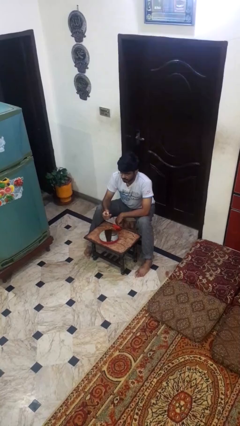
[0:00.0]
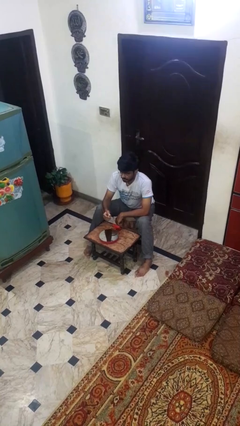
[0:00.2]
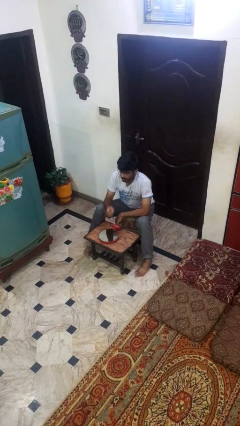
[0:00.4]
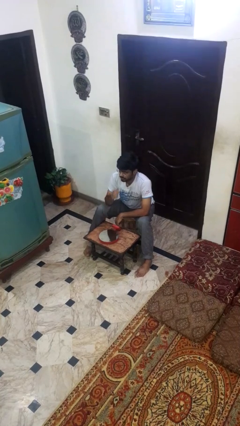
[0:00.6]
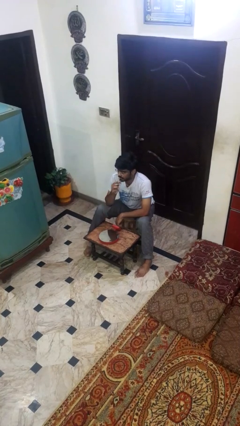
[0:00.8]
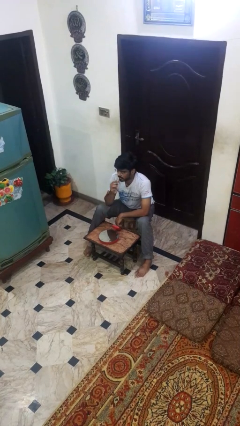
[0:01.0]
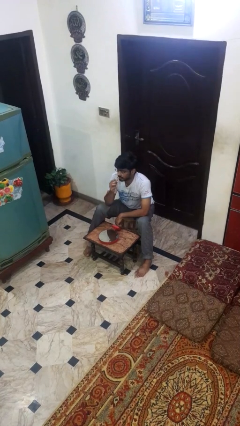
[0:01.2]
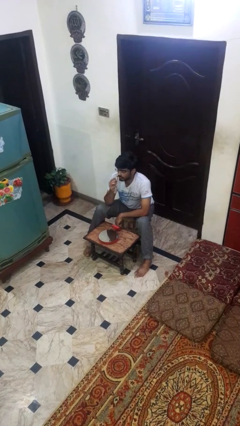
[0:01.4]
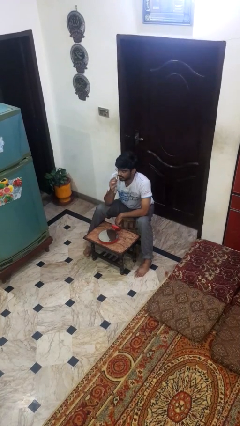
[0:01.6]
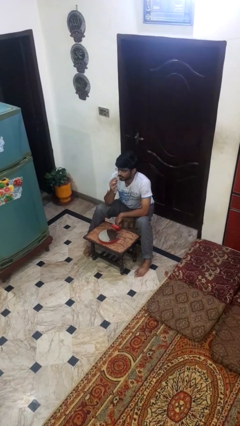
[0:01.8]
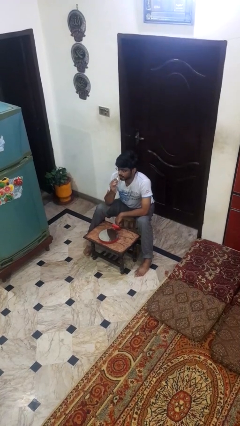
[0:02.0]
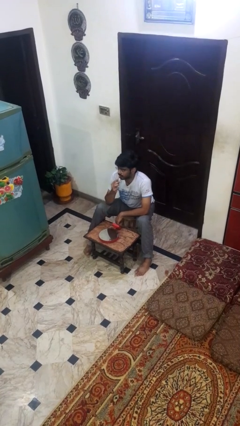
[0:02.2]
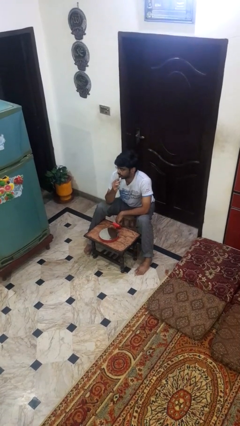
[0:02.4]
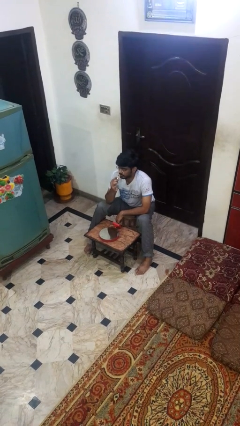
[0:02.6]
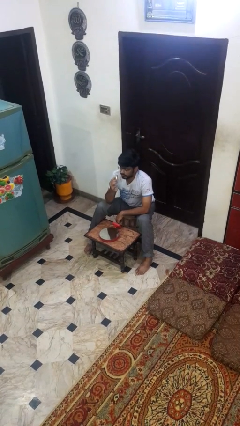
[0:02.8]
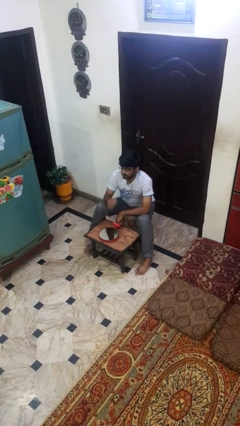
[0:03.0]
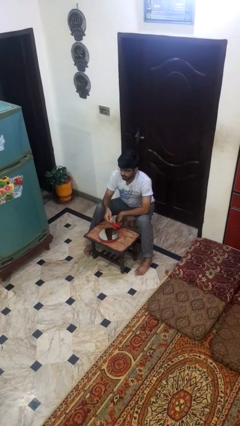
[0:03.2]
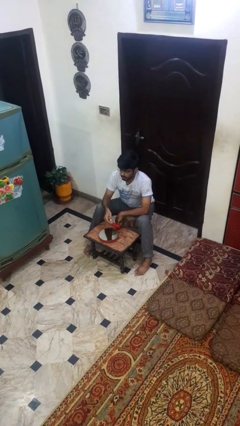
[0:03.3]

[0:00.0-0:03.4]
person applies lip makeup

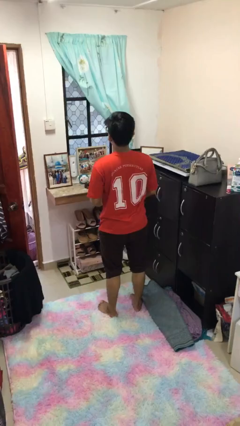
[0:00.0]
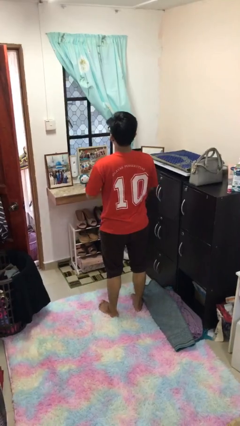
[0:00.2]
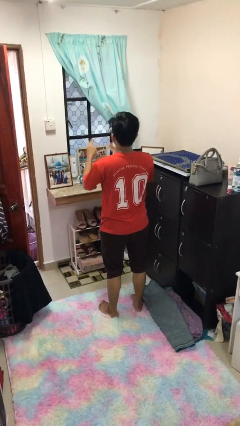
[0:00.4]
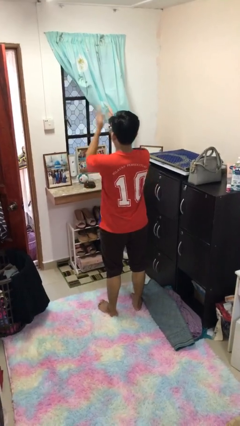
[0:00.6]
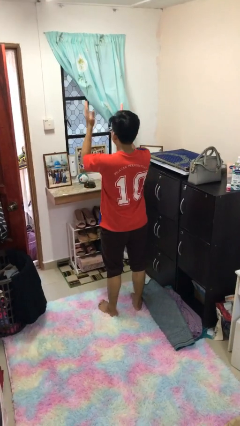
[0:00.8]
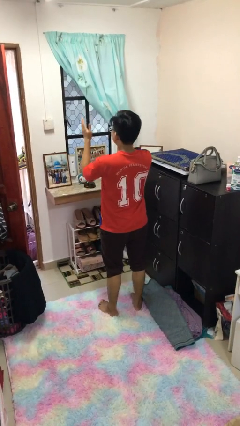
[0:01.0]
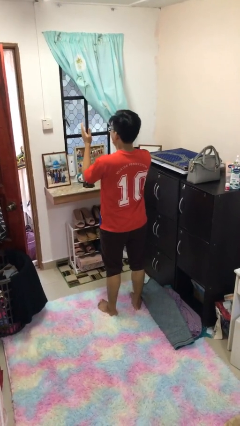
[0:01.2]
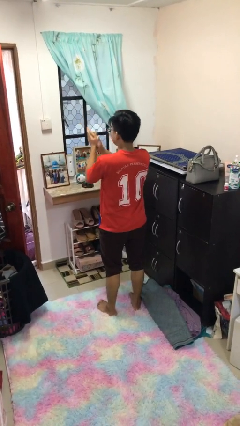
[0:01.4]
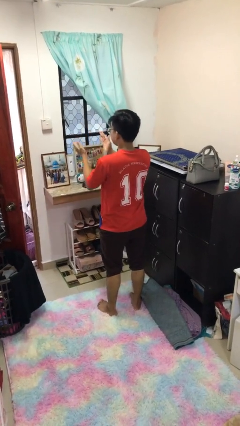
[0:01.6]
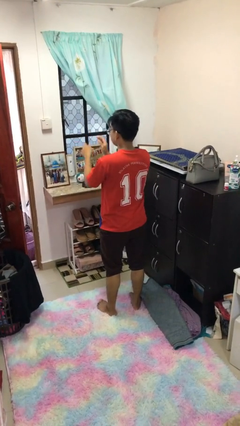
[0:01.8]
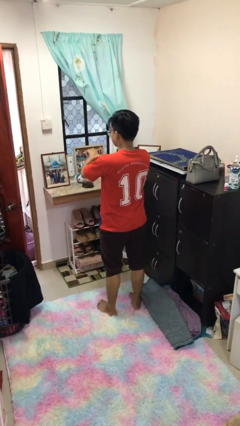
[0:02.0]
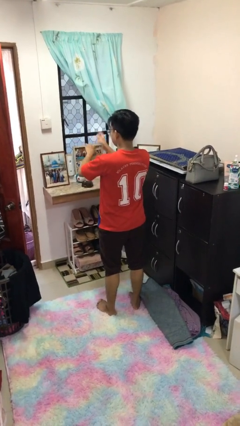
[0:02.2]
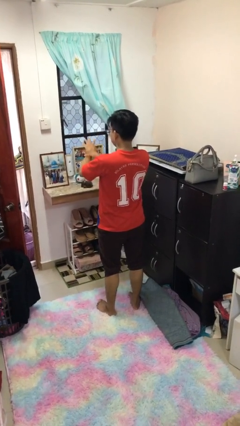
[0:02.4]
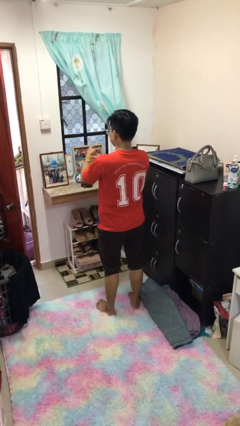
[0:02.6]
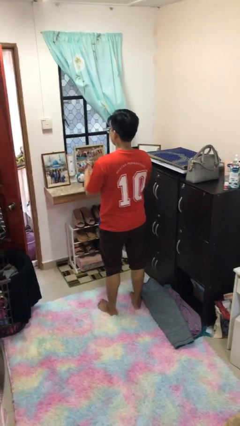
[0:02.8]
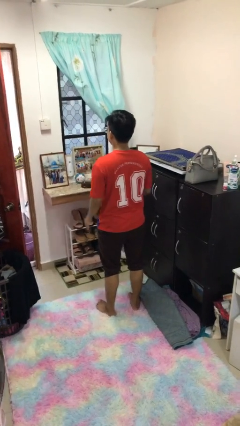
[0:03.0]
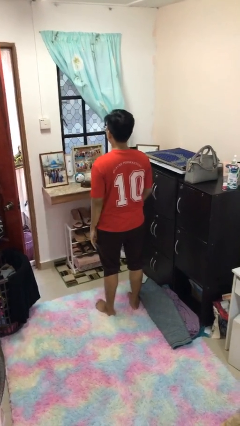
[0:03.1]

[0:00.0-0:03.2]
person swats bug

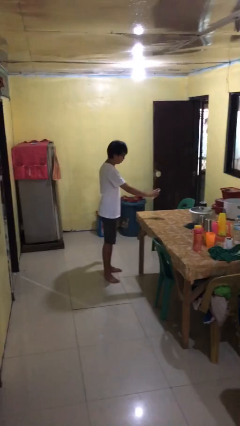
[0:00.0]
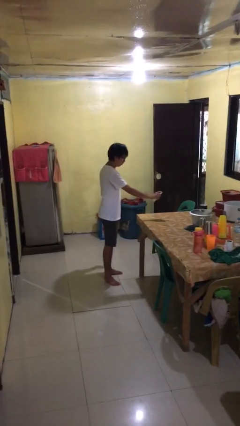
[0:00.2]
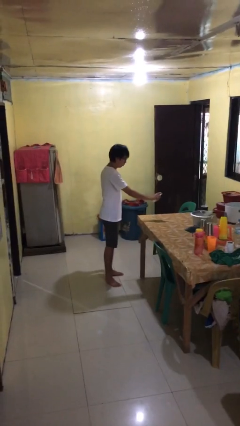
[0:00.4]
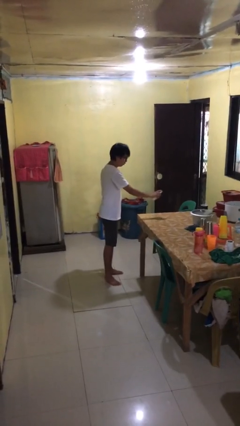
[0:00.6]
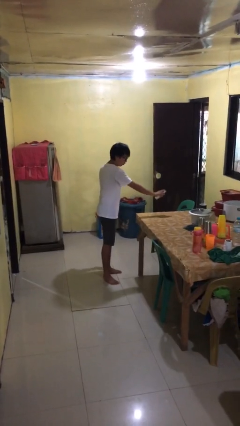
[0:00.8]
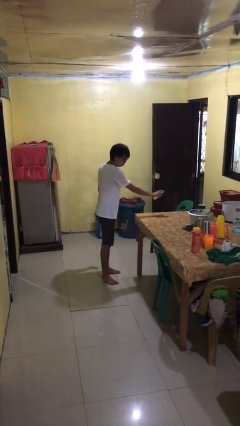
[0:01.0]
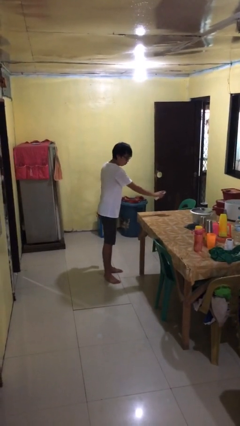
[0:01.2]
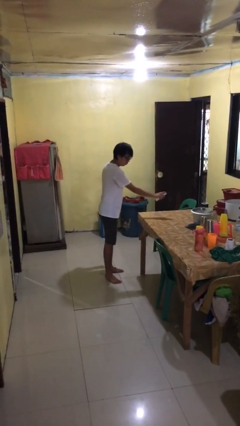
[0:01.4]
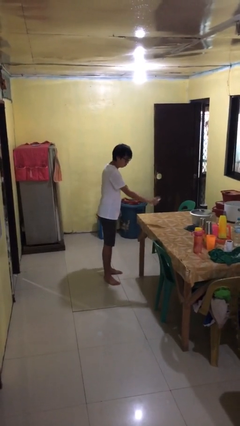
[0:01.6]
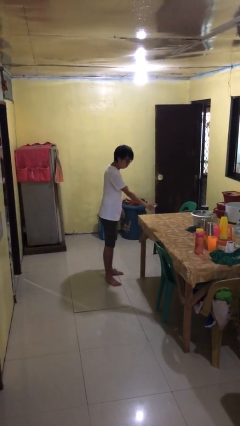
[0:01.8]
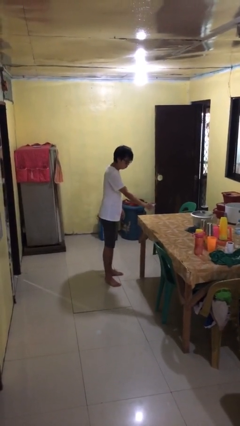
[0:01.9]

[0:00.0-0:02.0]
person sprays from bottle

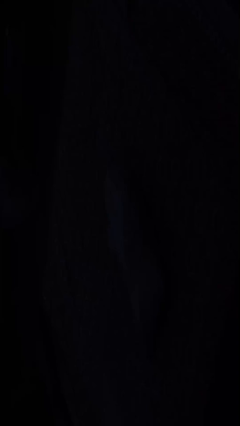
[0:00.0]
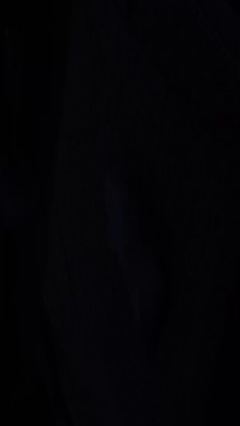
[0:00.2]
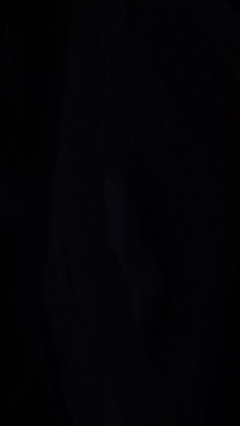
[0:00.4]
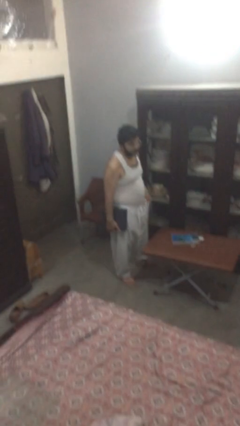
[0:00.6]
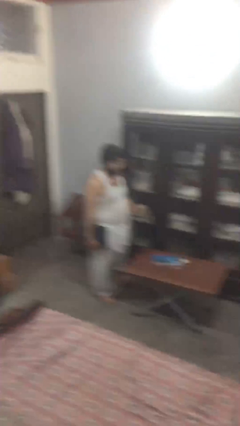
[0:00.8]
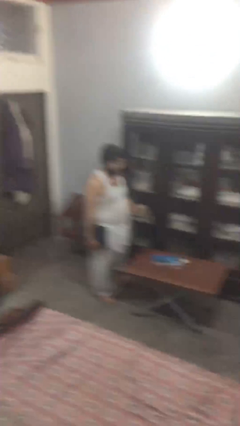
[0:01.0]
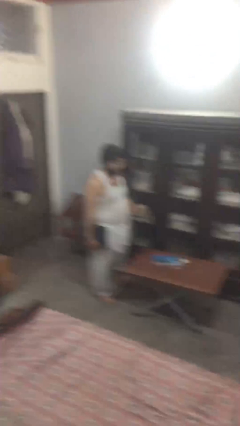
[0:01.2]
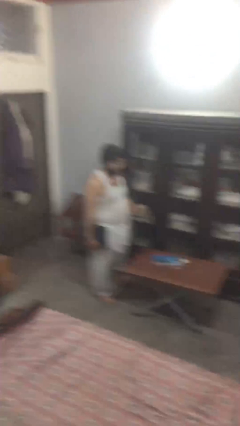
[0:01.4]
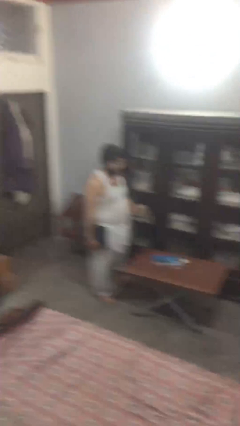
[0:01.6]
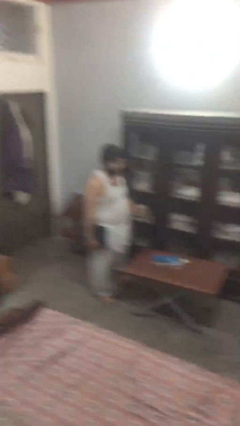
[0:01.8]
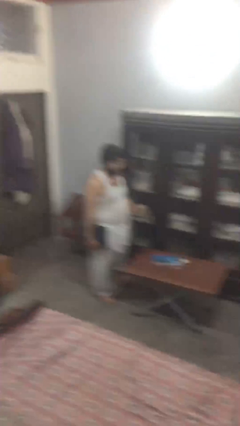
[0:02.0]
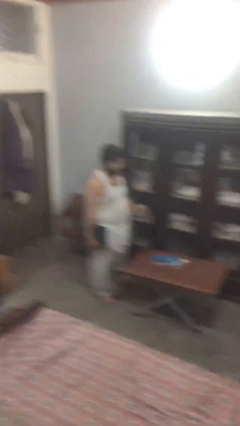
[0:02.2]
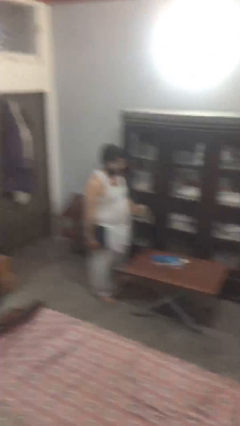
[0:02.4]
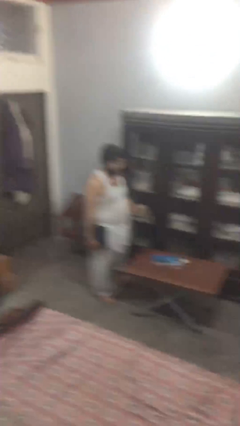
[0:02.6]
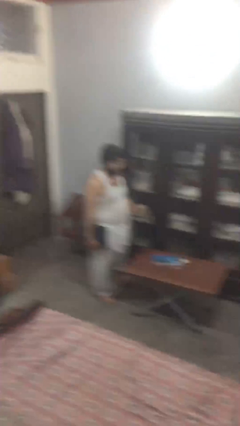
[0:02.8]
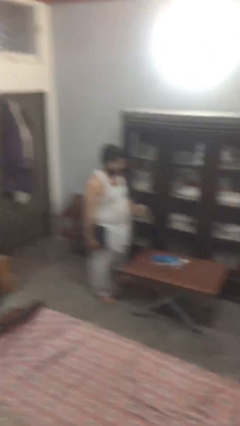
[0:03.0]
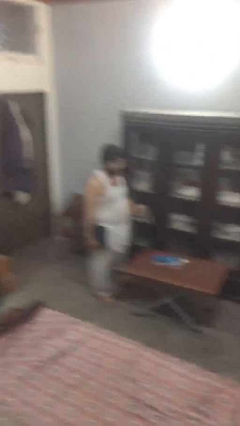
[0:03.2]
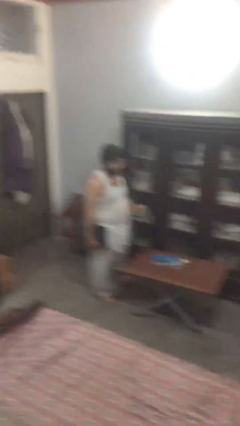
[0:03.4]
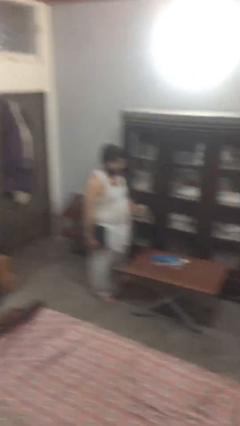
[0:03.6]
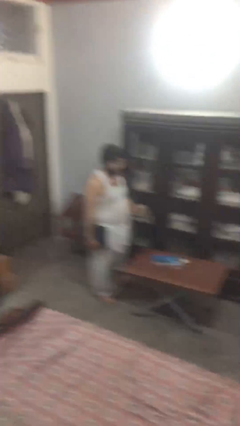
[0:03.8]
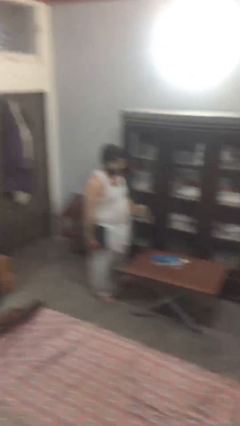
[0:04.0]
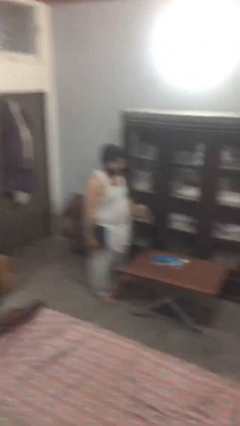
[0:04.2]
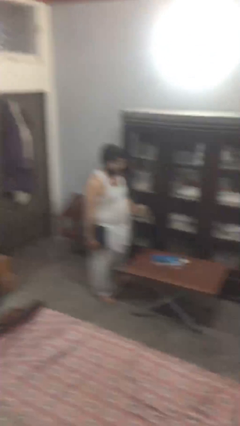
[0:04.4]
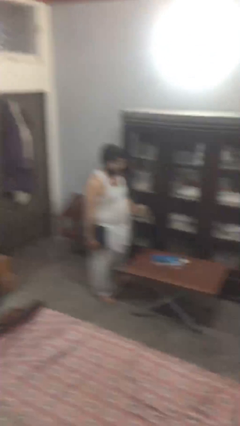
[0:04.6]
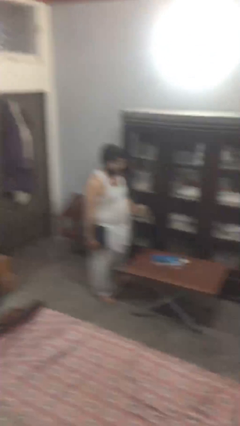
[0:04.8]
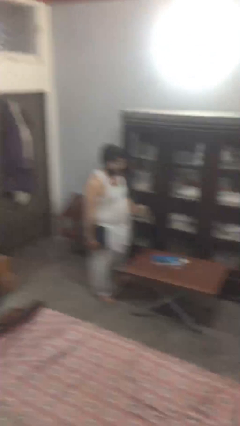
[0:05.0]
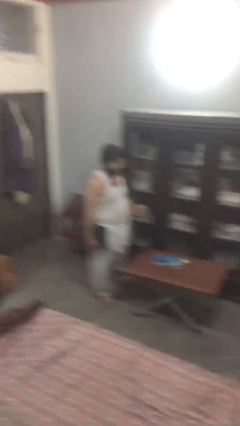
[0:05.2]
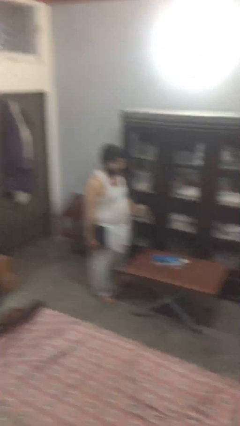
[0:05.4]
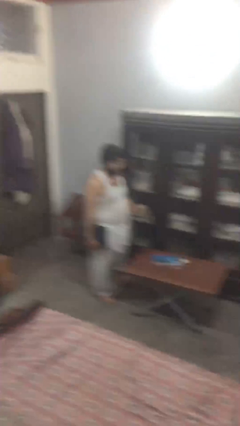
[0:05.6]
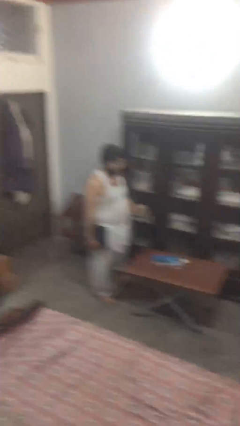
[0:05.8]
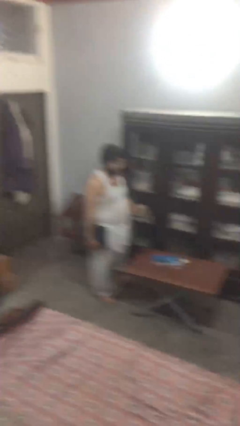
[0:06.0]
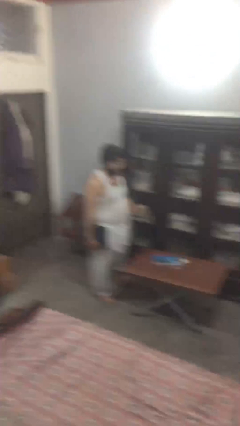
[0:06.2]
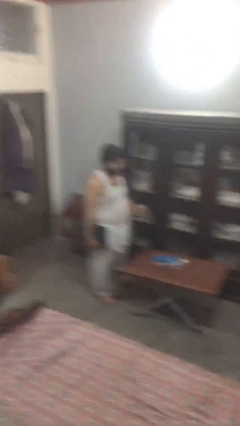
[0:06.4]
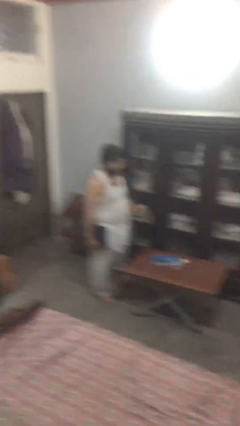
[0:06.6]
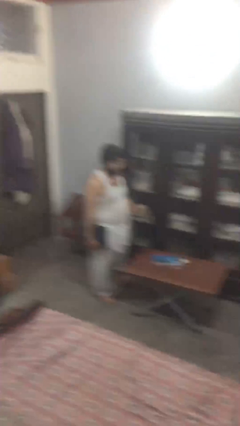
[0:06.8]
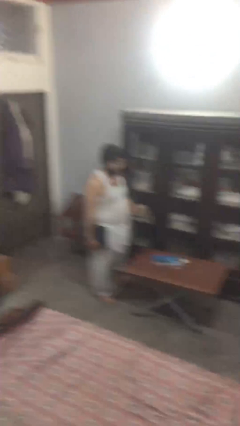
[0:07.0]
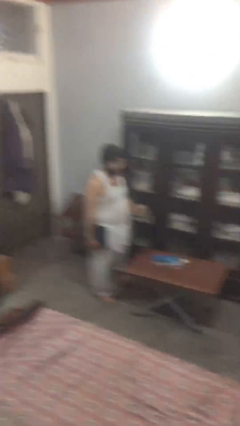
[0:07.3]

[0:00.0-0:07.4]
person puts down object on table

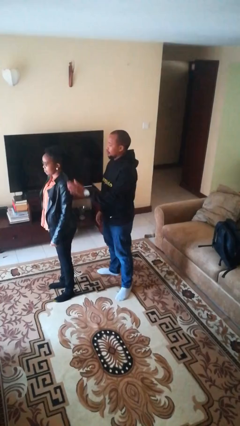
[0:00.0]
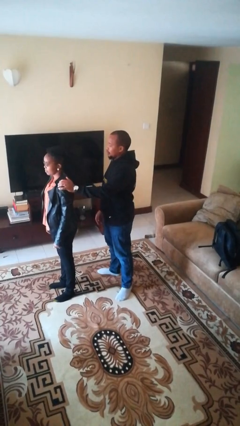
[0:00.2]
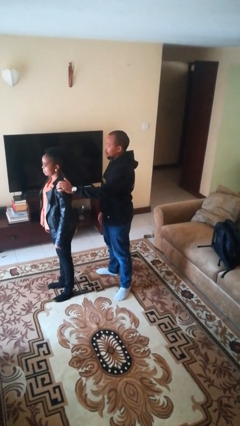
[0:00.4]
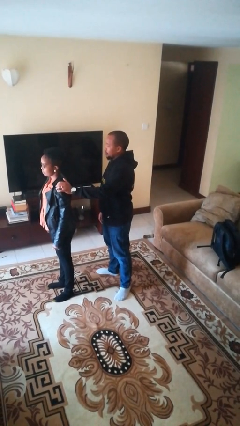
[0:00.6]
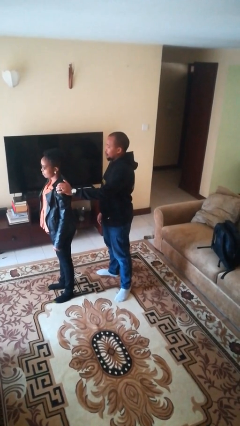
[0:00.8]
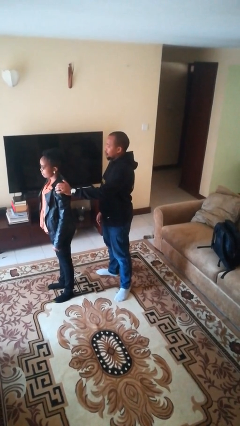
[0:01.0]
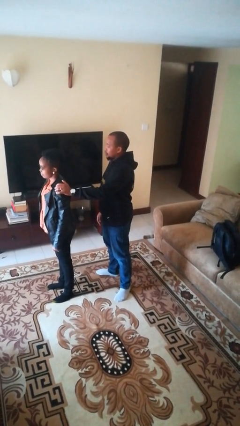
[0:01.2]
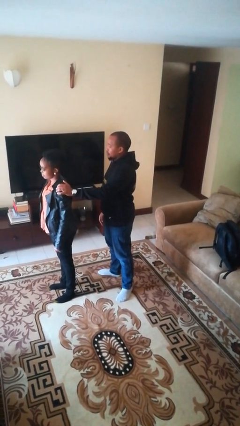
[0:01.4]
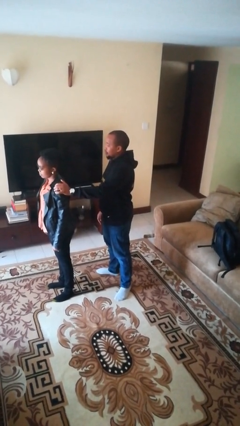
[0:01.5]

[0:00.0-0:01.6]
person grabs person by shoulder
